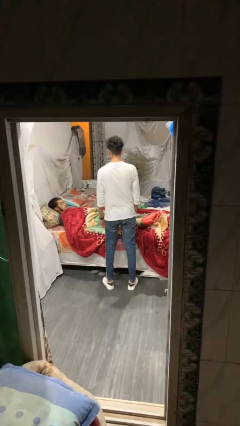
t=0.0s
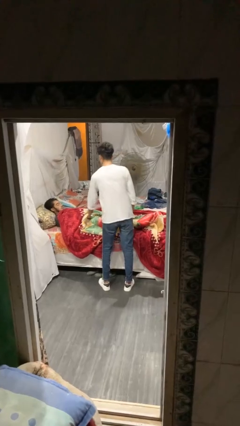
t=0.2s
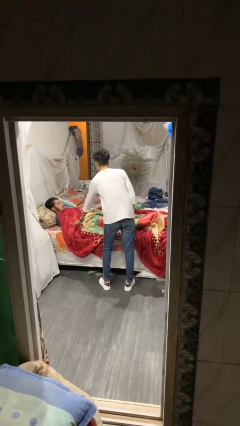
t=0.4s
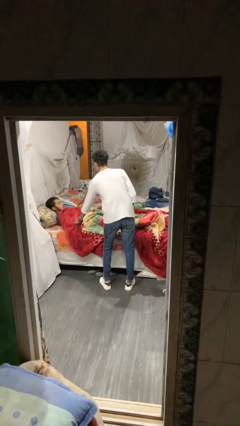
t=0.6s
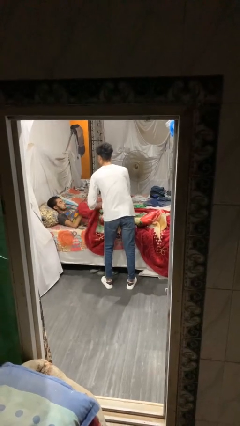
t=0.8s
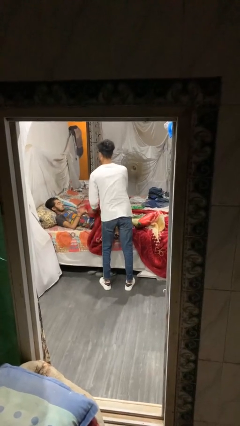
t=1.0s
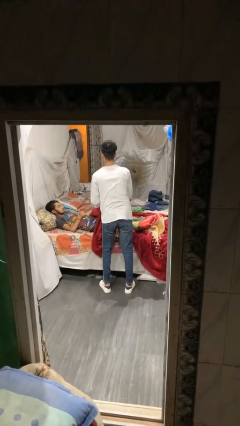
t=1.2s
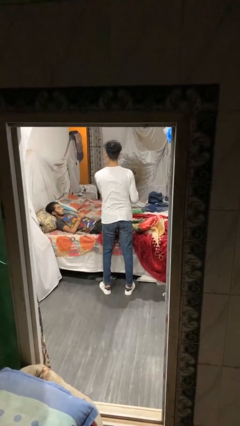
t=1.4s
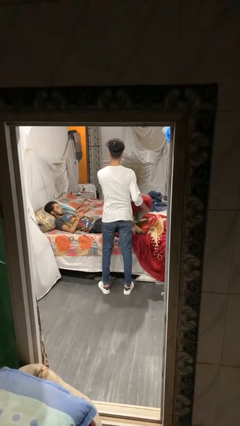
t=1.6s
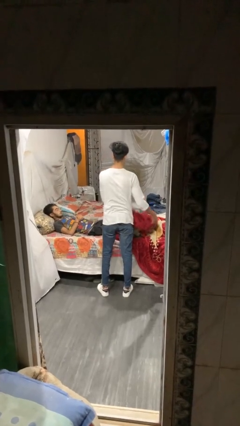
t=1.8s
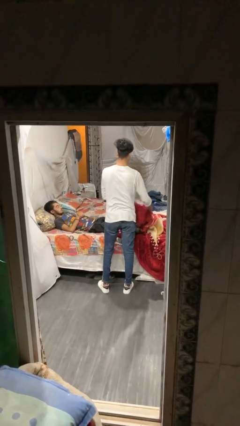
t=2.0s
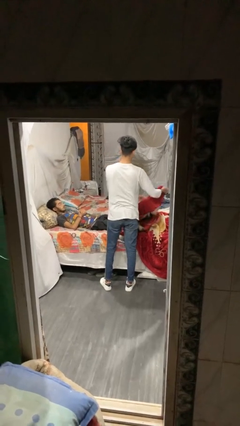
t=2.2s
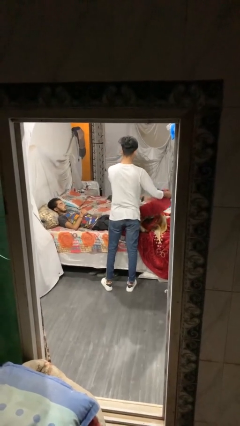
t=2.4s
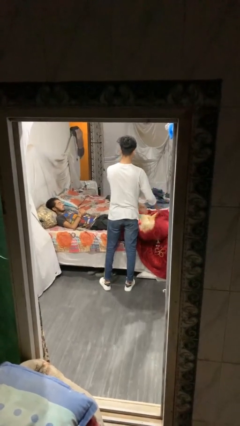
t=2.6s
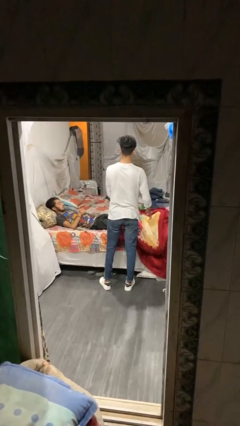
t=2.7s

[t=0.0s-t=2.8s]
person uncovers friend with blanket

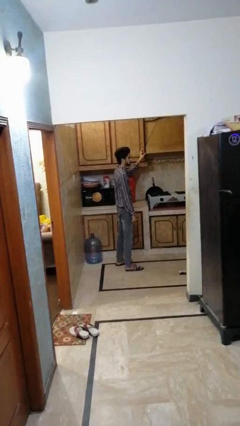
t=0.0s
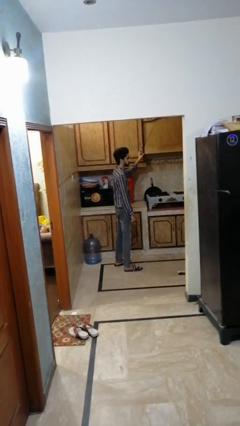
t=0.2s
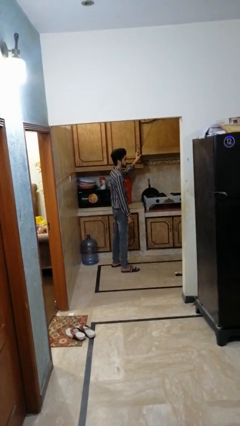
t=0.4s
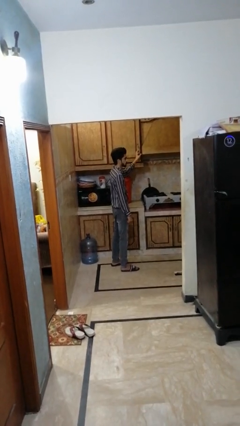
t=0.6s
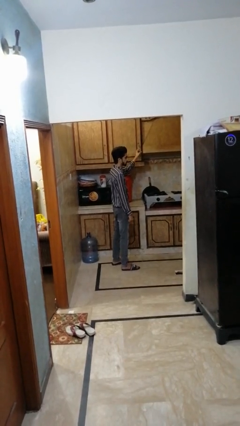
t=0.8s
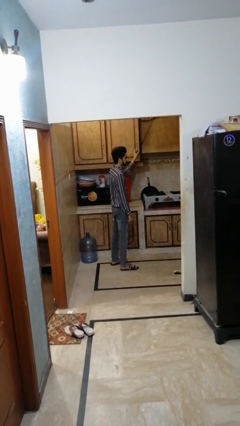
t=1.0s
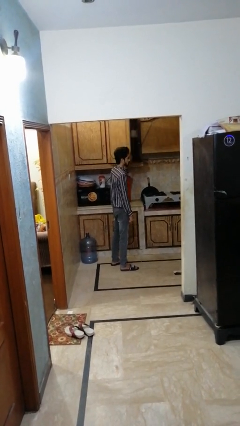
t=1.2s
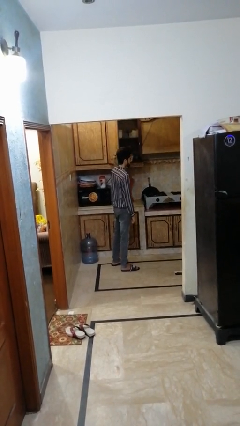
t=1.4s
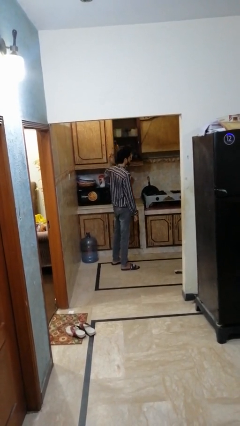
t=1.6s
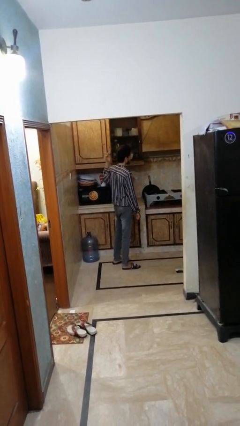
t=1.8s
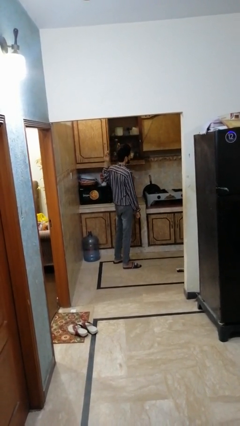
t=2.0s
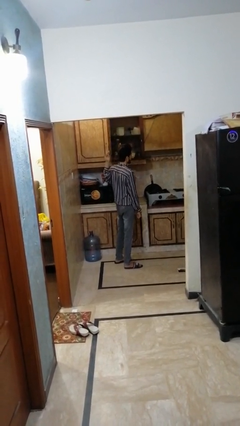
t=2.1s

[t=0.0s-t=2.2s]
person opens cabinet

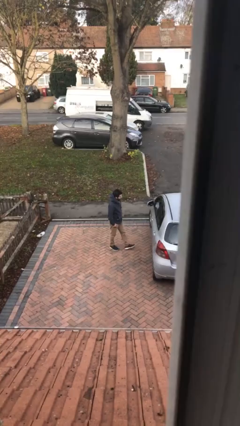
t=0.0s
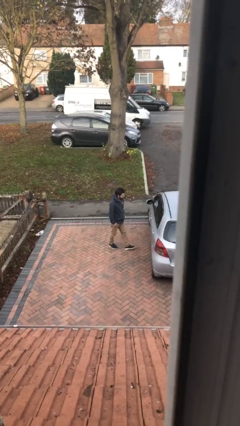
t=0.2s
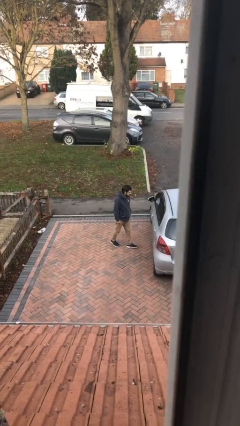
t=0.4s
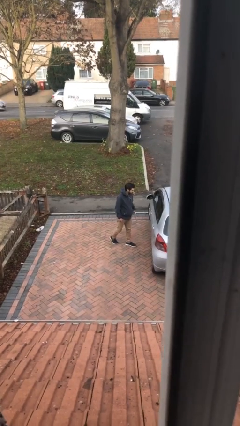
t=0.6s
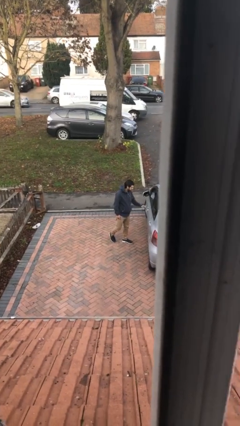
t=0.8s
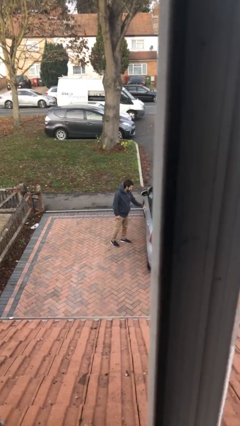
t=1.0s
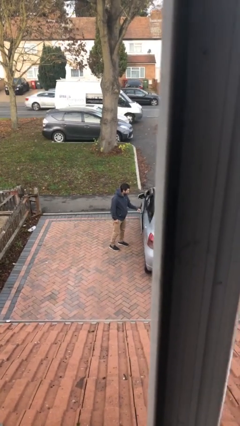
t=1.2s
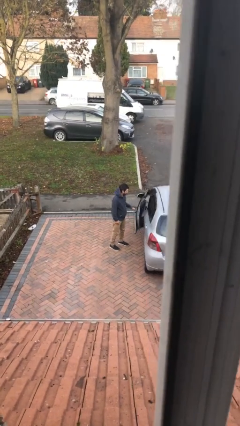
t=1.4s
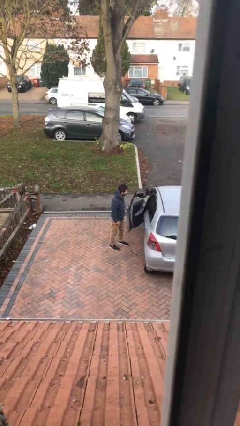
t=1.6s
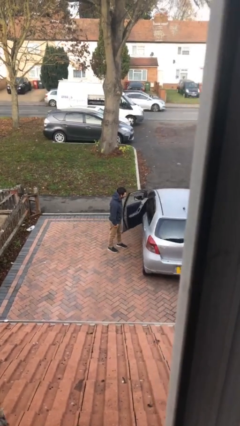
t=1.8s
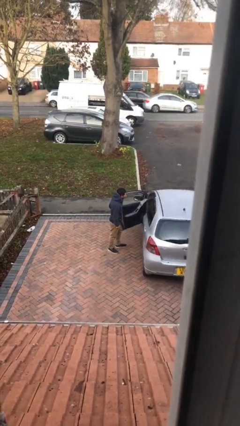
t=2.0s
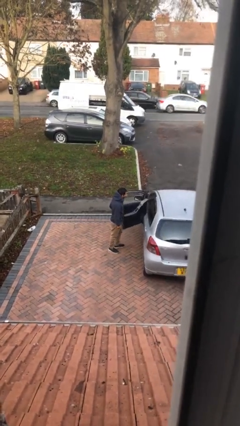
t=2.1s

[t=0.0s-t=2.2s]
person opens car door

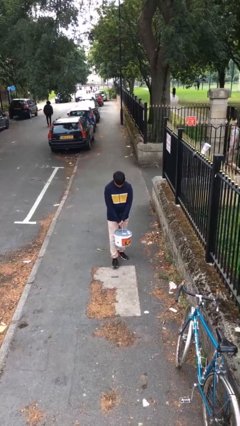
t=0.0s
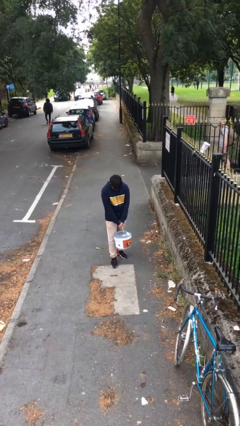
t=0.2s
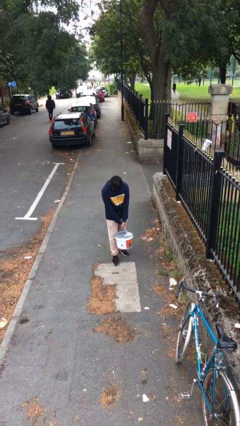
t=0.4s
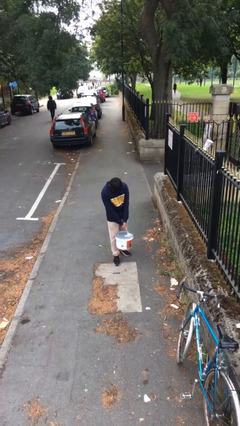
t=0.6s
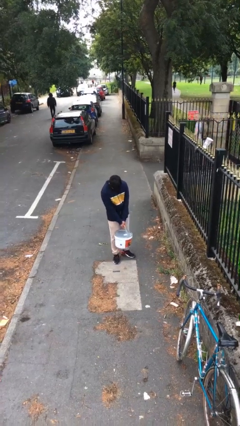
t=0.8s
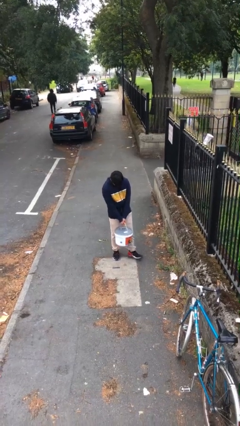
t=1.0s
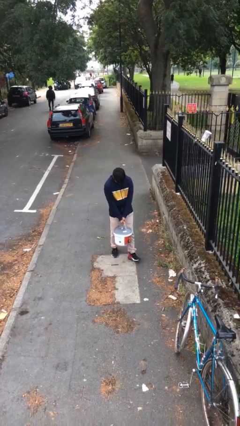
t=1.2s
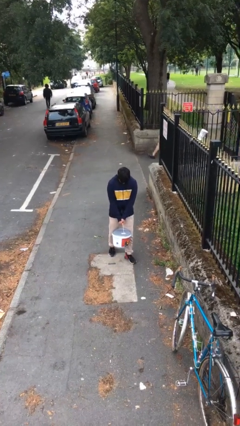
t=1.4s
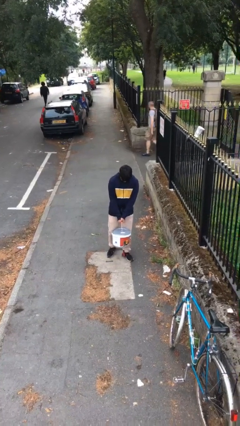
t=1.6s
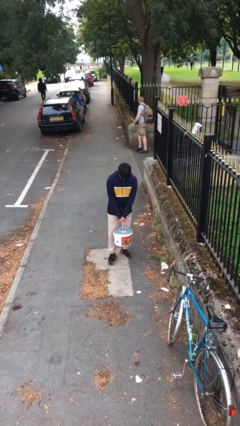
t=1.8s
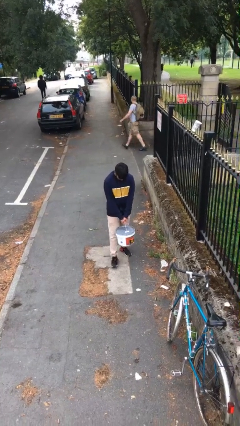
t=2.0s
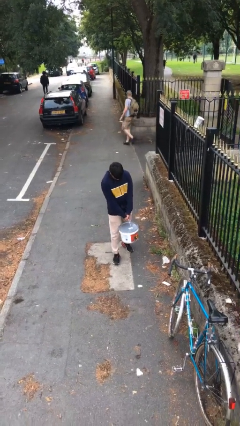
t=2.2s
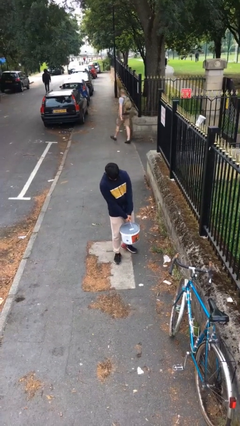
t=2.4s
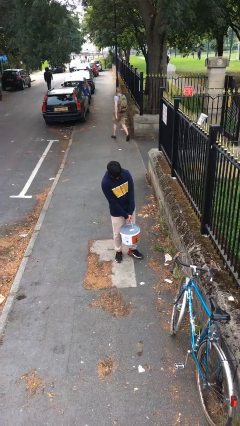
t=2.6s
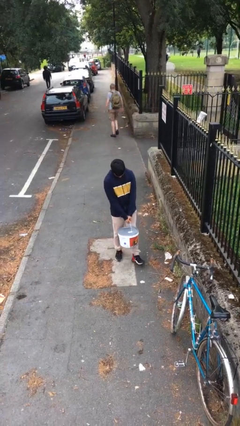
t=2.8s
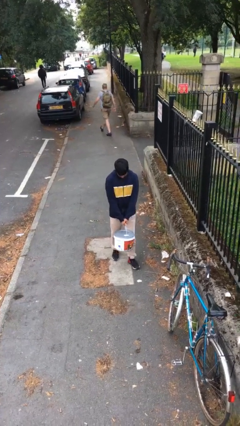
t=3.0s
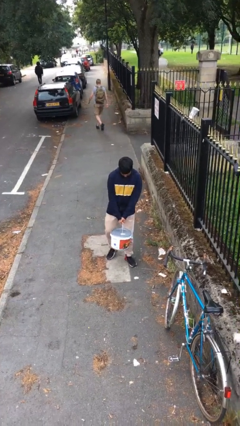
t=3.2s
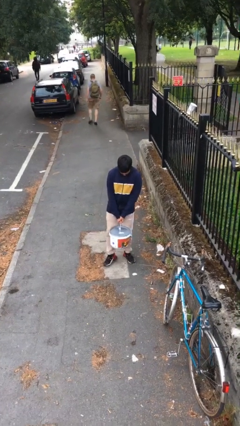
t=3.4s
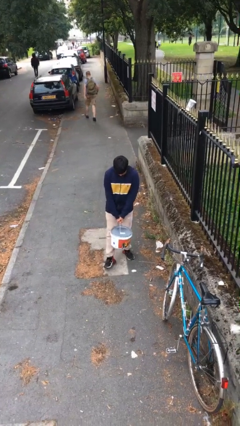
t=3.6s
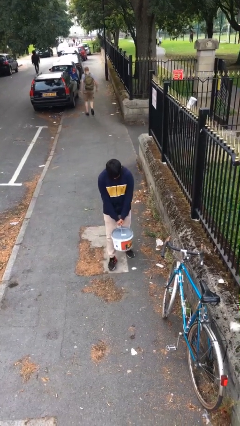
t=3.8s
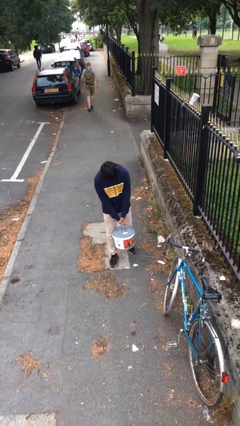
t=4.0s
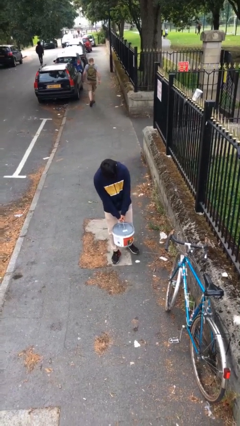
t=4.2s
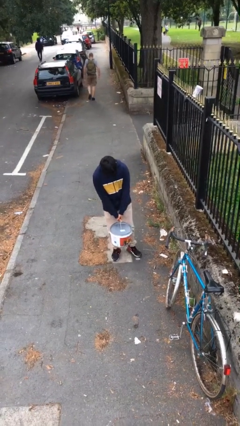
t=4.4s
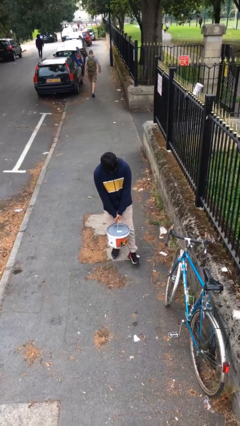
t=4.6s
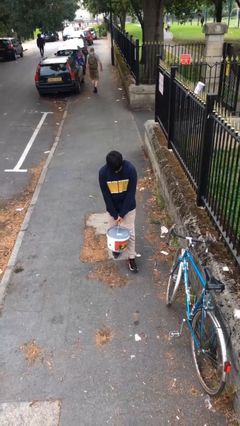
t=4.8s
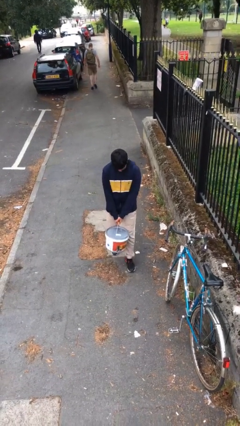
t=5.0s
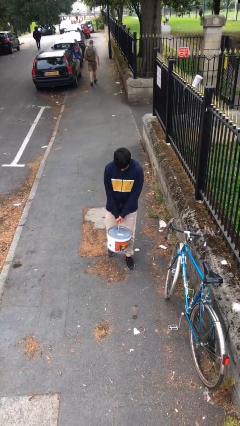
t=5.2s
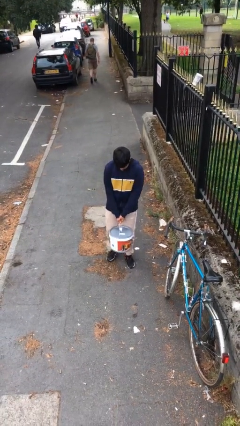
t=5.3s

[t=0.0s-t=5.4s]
person carries heavy object

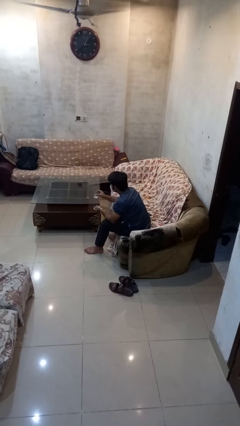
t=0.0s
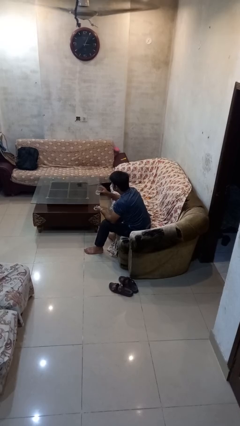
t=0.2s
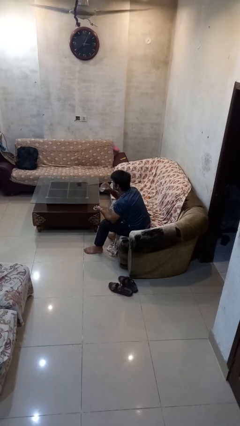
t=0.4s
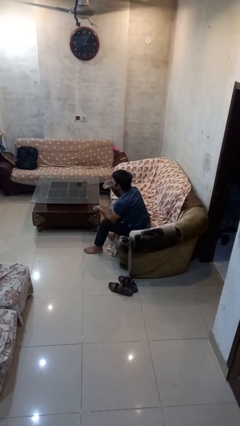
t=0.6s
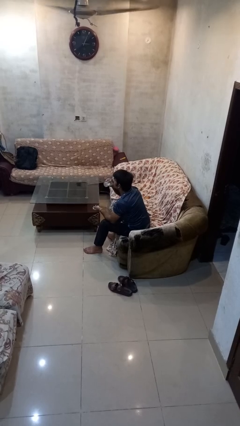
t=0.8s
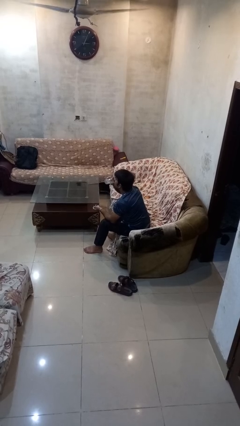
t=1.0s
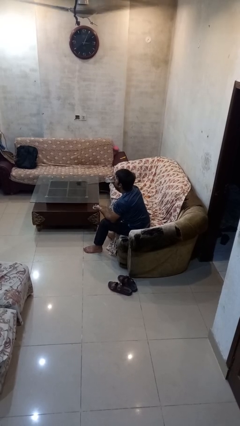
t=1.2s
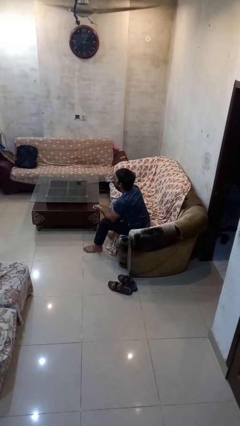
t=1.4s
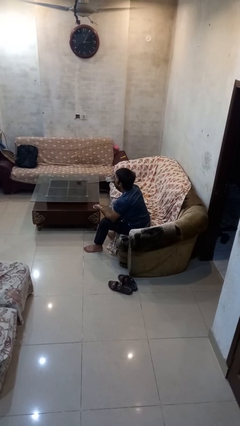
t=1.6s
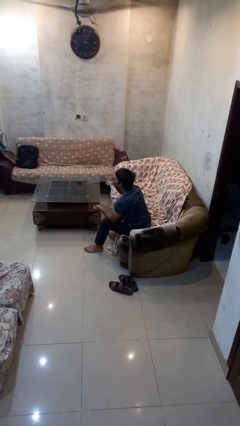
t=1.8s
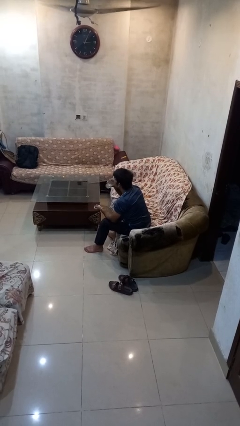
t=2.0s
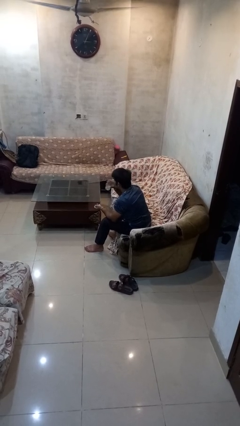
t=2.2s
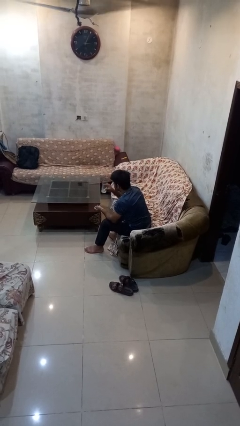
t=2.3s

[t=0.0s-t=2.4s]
person drinks from cup

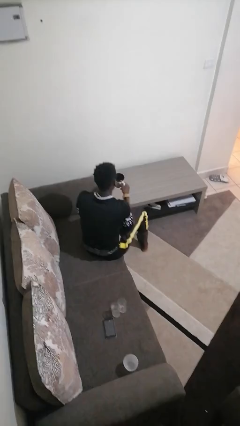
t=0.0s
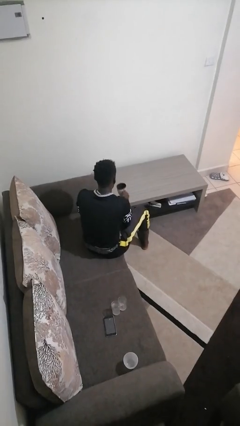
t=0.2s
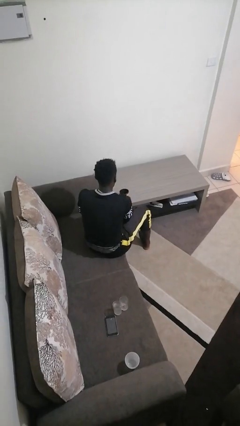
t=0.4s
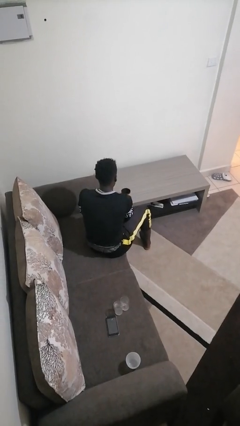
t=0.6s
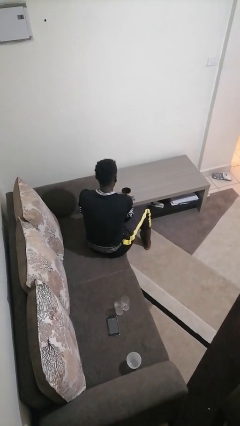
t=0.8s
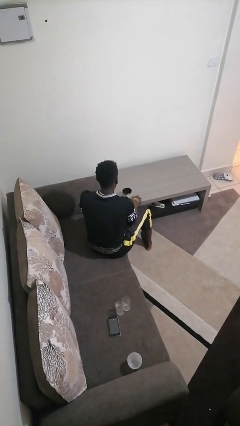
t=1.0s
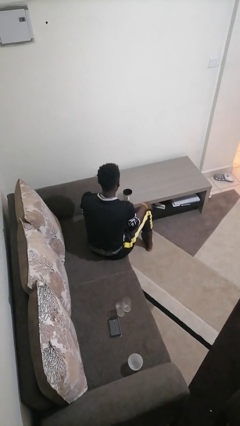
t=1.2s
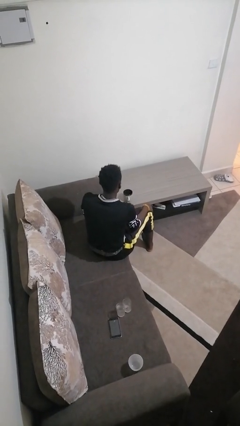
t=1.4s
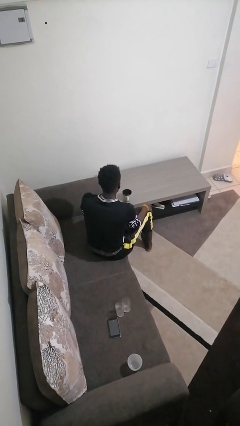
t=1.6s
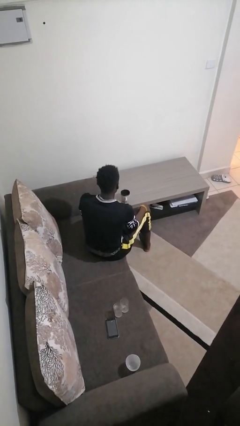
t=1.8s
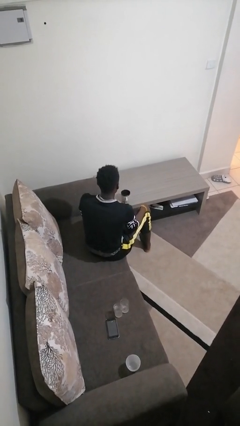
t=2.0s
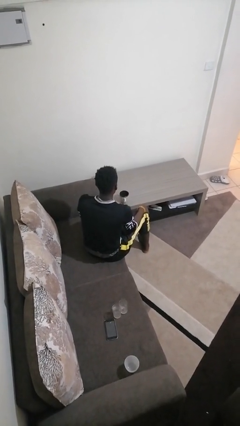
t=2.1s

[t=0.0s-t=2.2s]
person puts down object on table

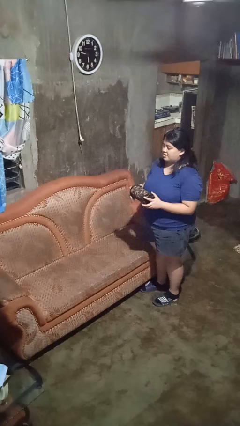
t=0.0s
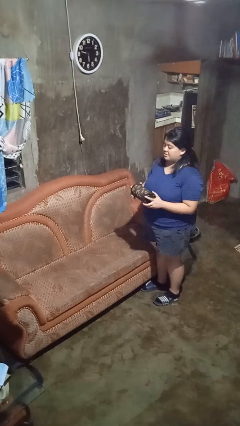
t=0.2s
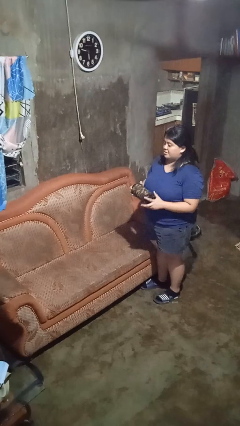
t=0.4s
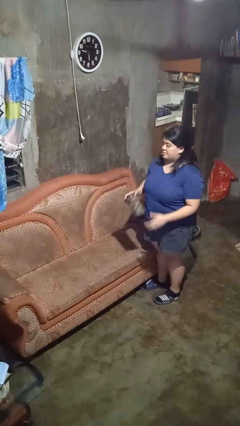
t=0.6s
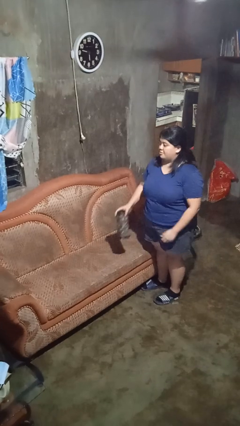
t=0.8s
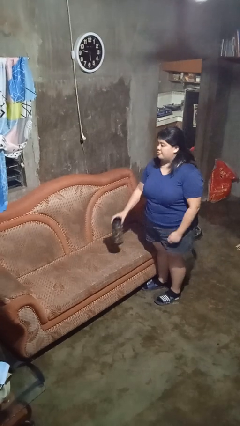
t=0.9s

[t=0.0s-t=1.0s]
person puts down object on couch
